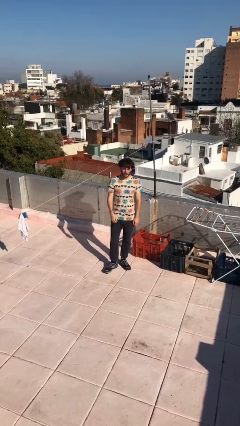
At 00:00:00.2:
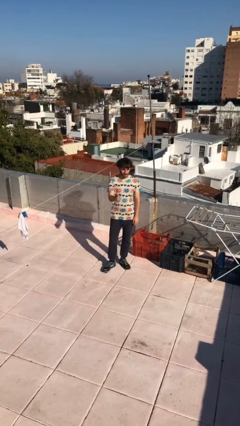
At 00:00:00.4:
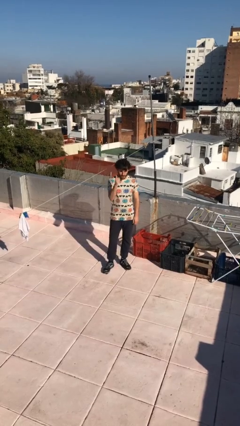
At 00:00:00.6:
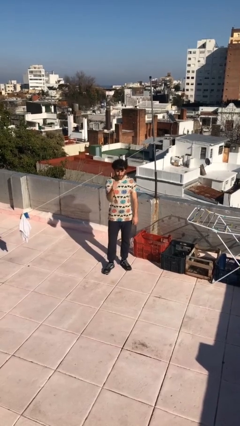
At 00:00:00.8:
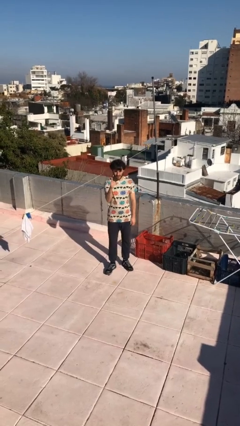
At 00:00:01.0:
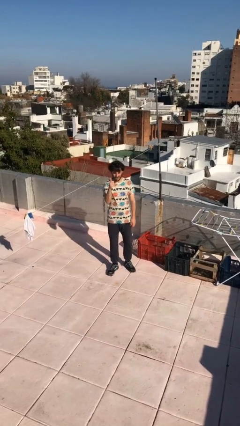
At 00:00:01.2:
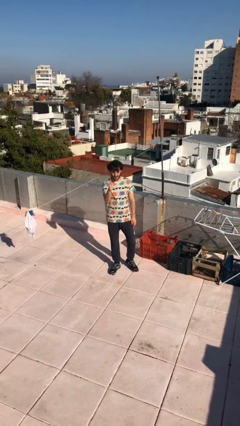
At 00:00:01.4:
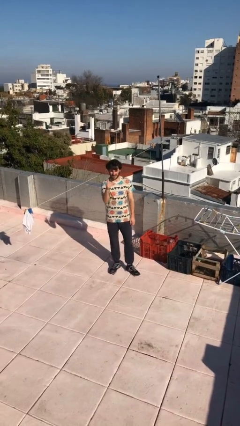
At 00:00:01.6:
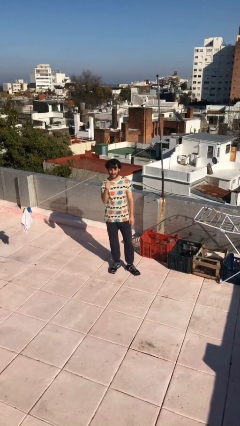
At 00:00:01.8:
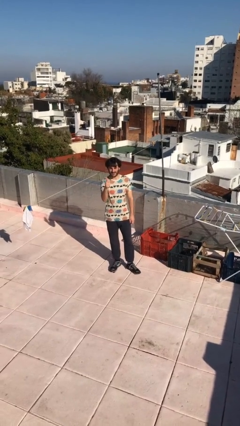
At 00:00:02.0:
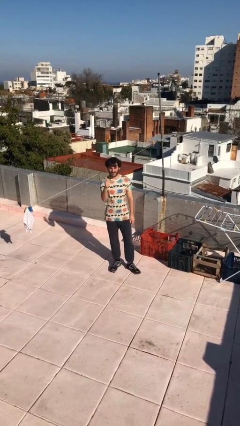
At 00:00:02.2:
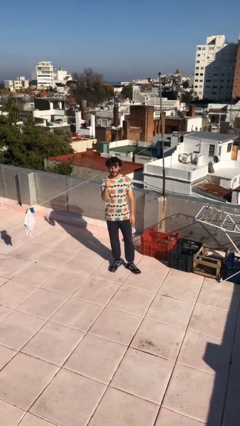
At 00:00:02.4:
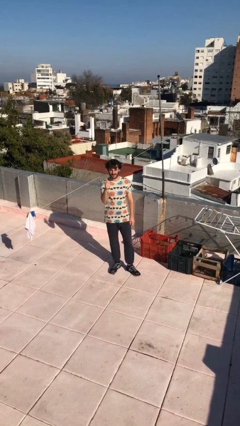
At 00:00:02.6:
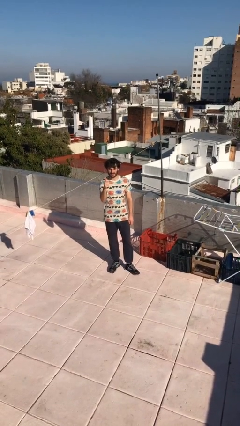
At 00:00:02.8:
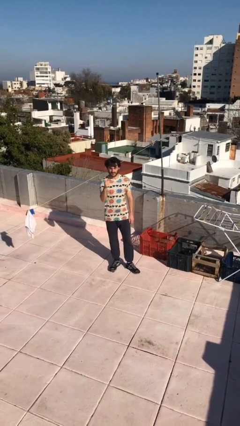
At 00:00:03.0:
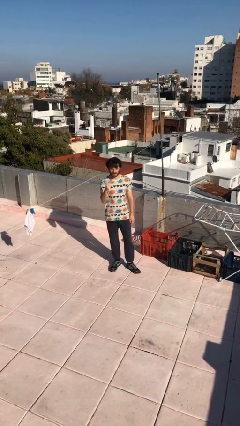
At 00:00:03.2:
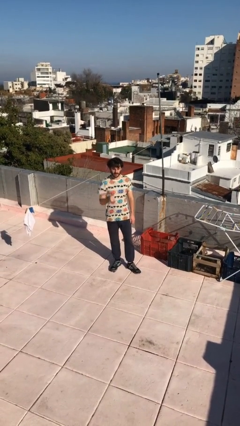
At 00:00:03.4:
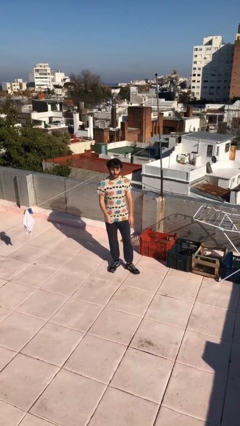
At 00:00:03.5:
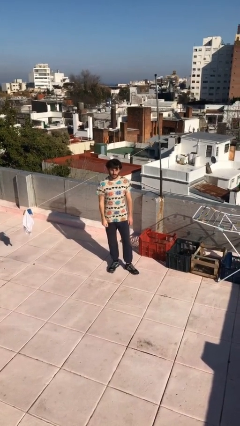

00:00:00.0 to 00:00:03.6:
person gestures thumbs up

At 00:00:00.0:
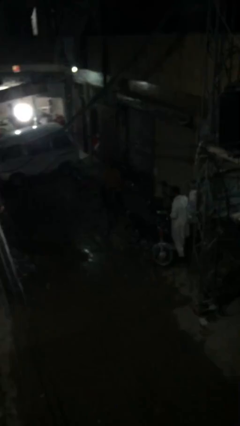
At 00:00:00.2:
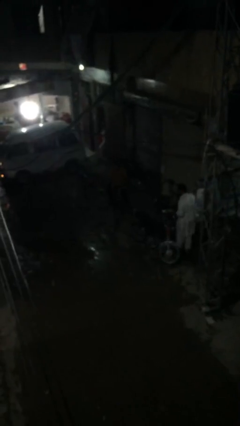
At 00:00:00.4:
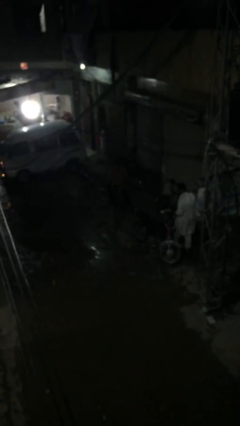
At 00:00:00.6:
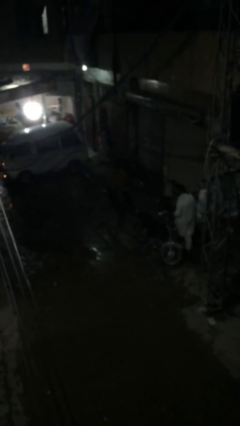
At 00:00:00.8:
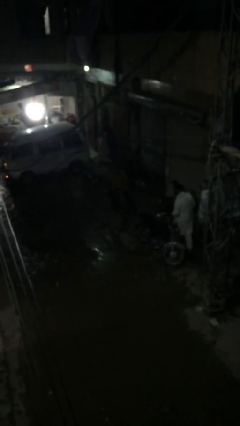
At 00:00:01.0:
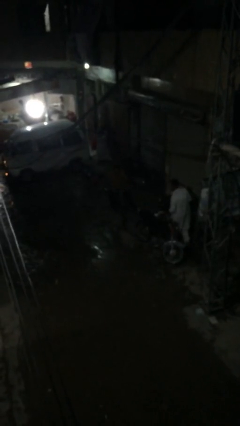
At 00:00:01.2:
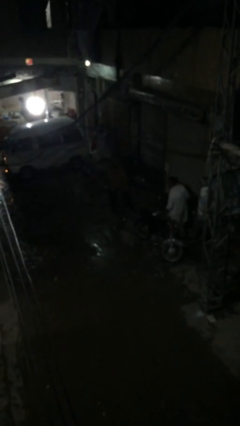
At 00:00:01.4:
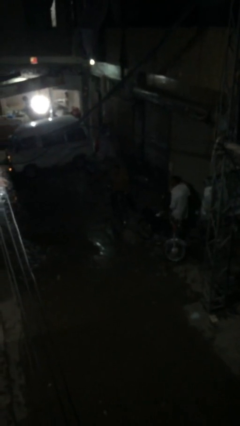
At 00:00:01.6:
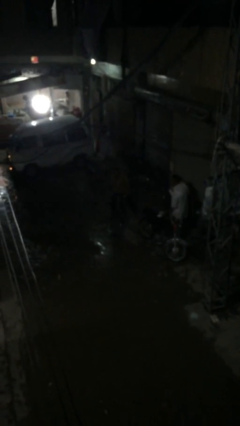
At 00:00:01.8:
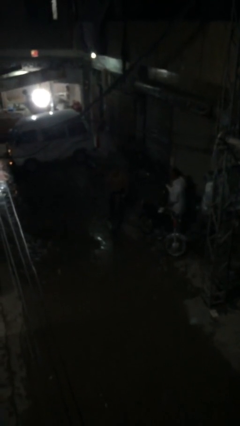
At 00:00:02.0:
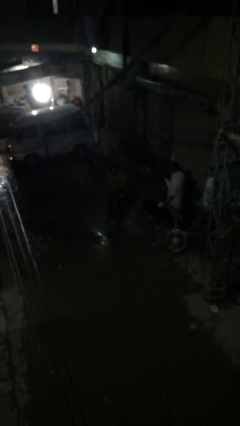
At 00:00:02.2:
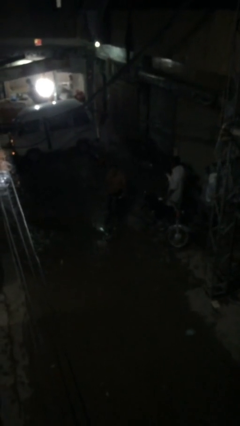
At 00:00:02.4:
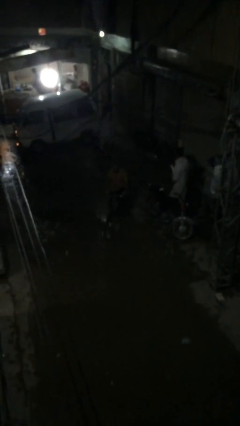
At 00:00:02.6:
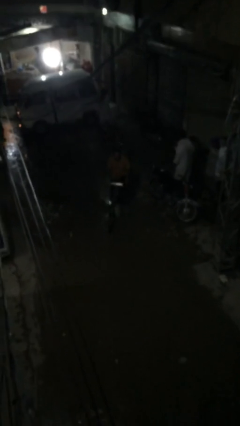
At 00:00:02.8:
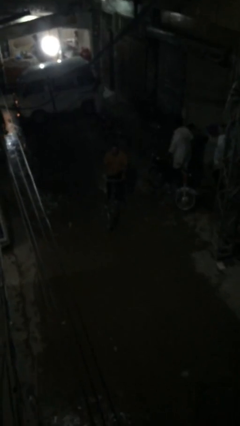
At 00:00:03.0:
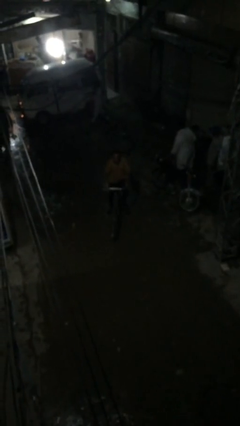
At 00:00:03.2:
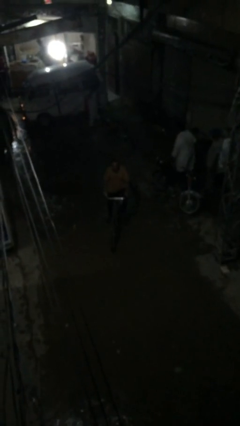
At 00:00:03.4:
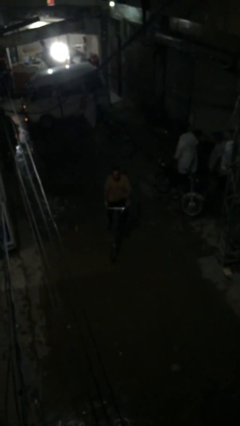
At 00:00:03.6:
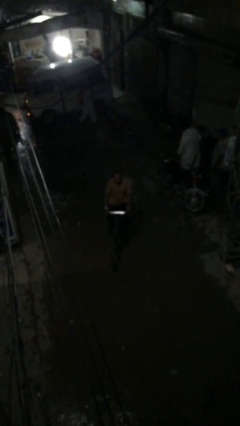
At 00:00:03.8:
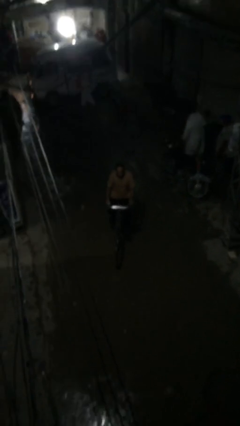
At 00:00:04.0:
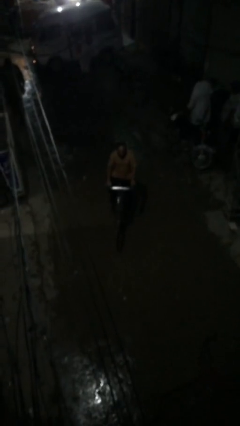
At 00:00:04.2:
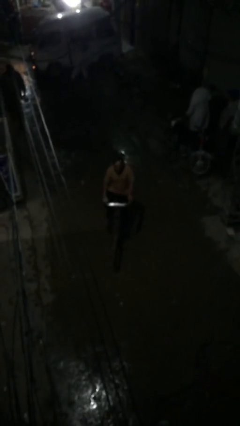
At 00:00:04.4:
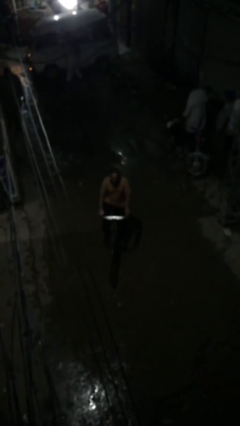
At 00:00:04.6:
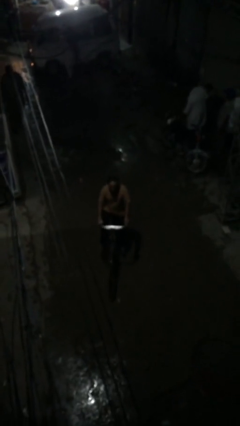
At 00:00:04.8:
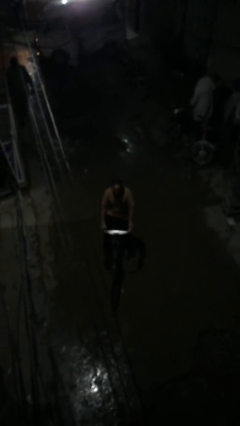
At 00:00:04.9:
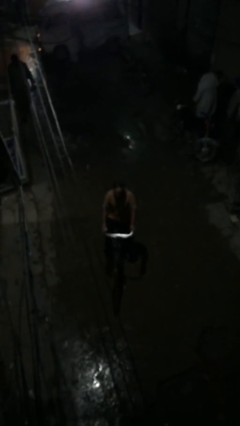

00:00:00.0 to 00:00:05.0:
person rides bicycle

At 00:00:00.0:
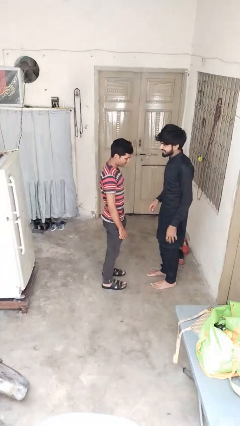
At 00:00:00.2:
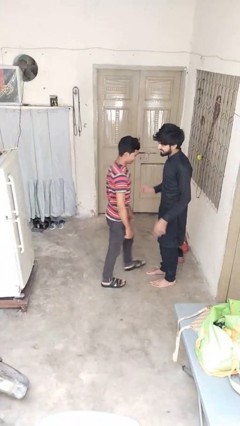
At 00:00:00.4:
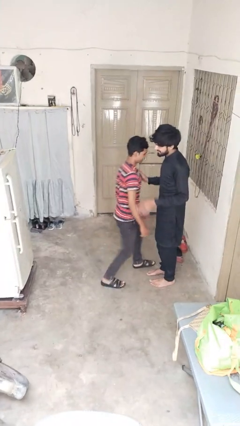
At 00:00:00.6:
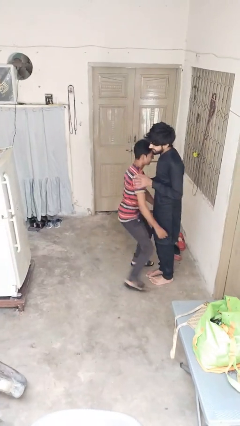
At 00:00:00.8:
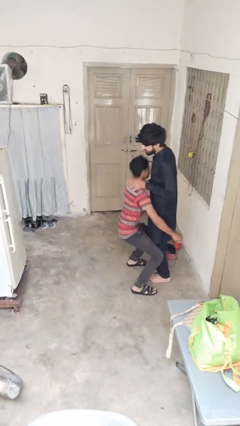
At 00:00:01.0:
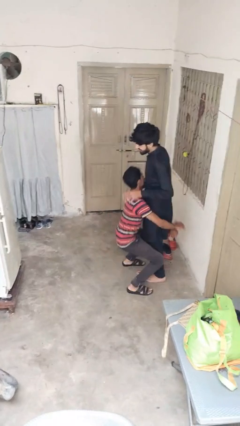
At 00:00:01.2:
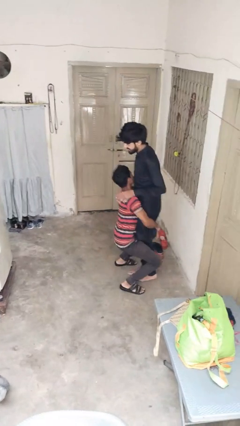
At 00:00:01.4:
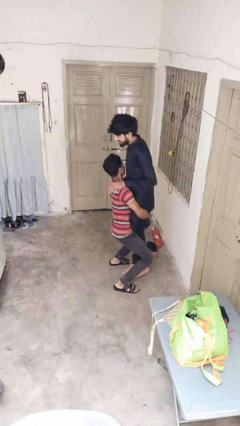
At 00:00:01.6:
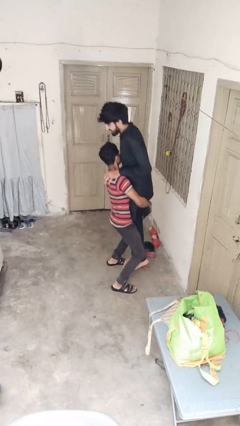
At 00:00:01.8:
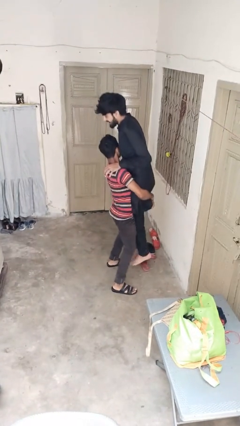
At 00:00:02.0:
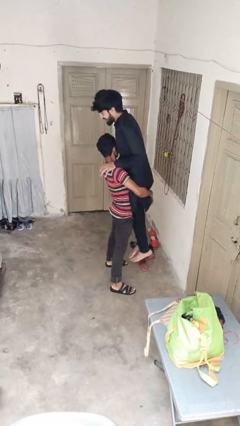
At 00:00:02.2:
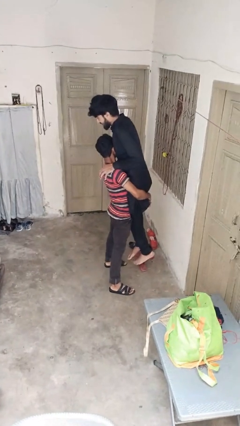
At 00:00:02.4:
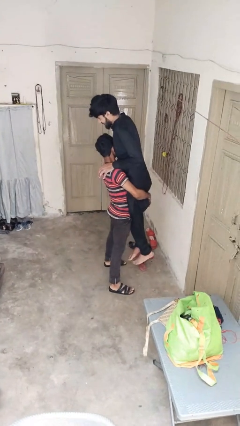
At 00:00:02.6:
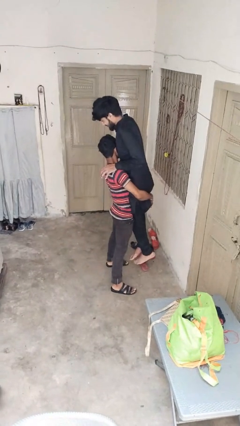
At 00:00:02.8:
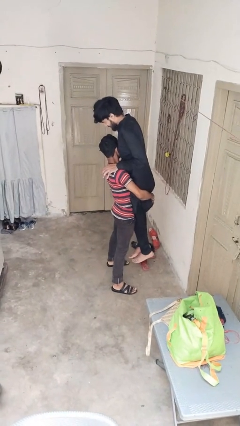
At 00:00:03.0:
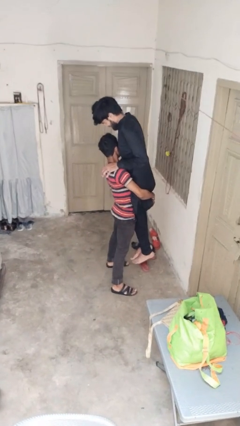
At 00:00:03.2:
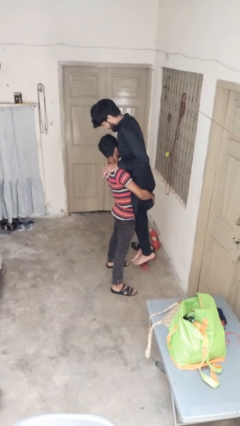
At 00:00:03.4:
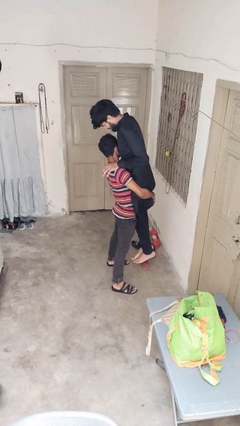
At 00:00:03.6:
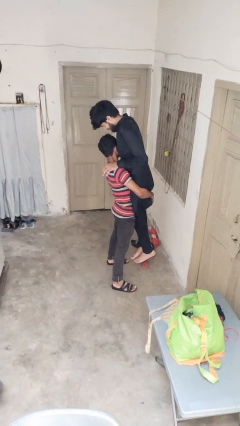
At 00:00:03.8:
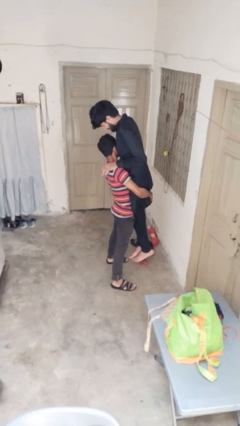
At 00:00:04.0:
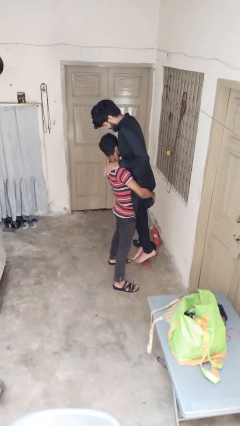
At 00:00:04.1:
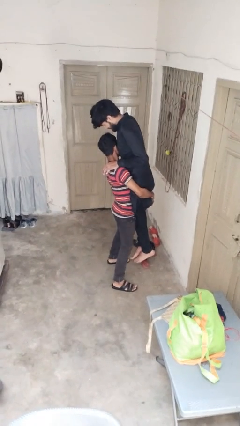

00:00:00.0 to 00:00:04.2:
person picks up person

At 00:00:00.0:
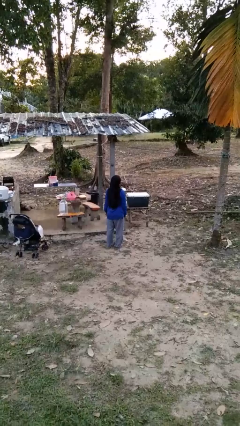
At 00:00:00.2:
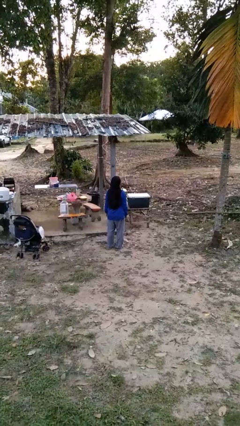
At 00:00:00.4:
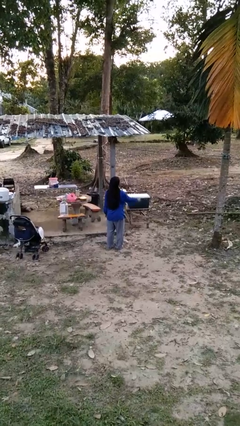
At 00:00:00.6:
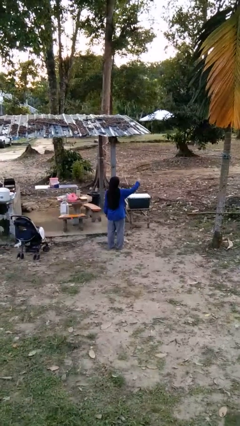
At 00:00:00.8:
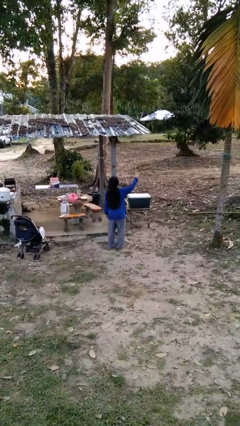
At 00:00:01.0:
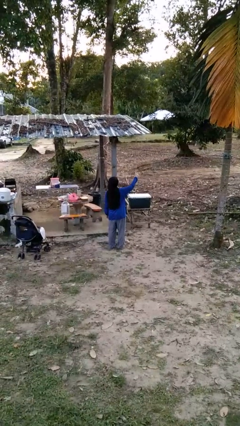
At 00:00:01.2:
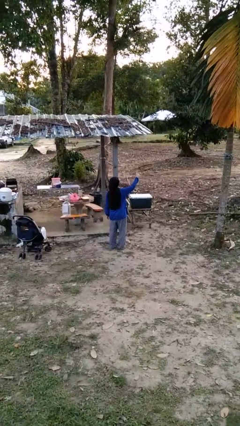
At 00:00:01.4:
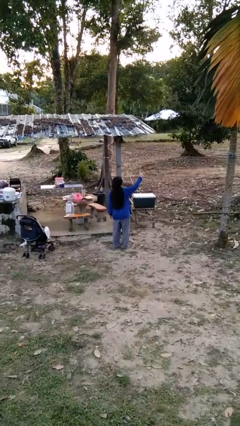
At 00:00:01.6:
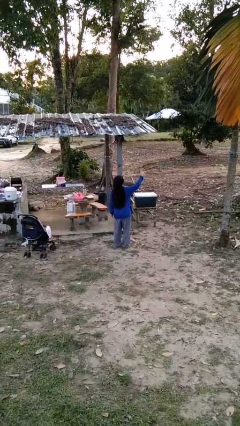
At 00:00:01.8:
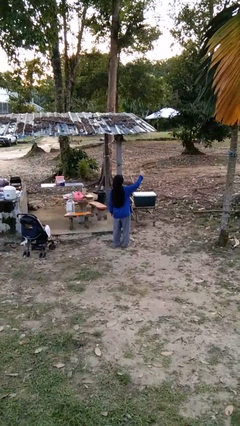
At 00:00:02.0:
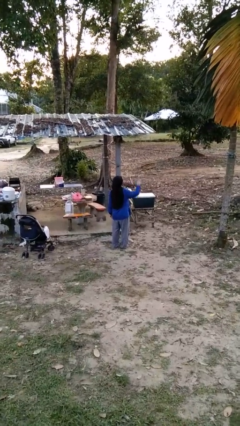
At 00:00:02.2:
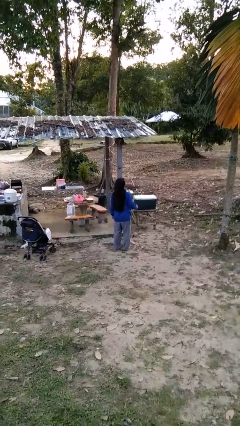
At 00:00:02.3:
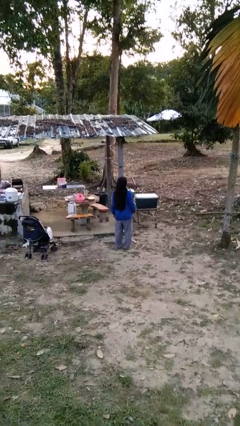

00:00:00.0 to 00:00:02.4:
person gestures number three

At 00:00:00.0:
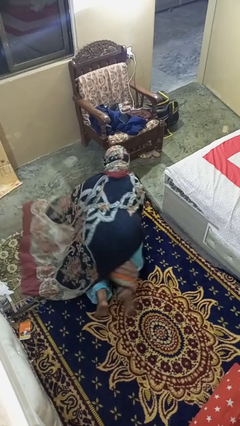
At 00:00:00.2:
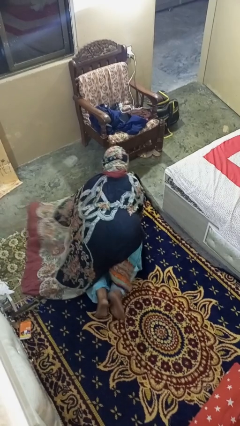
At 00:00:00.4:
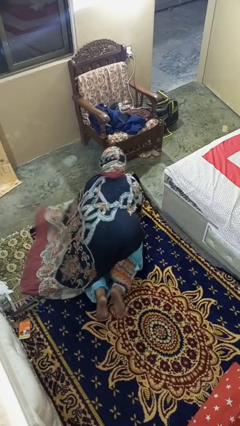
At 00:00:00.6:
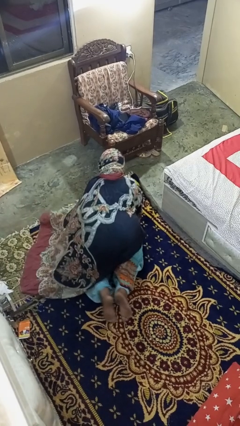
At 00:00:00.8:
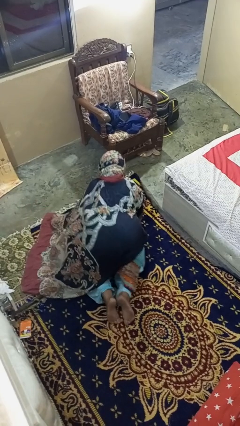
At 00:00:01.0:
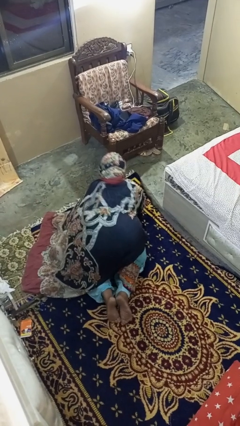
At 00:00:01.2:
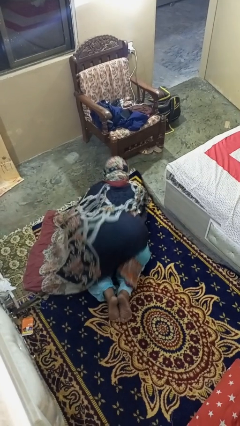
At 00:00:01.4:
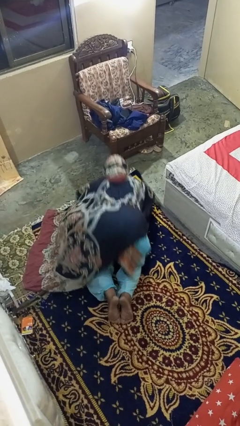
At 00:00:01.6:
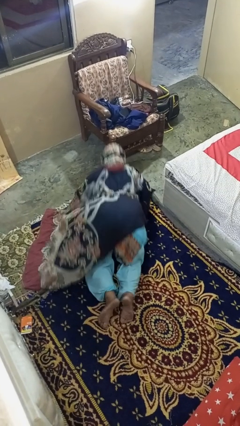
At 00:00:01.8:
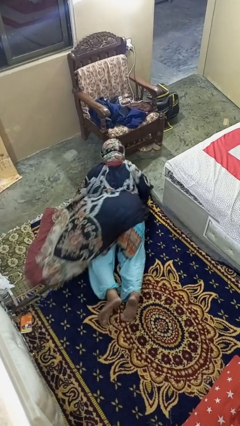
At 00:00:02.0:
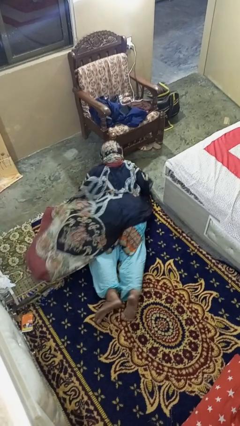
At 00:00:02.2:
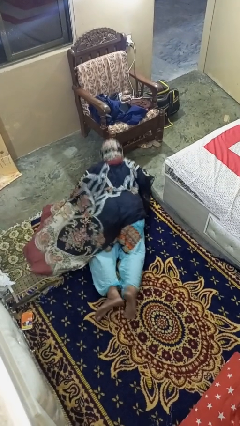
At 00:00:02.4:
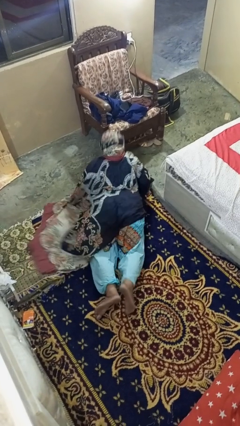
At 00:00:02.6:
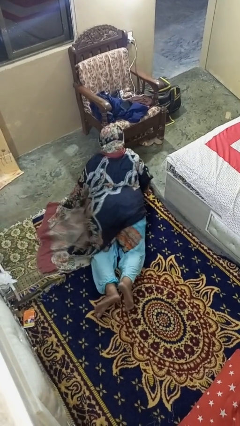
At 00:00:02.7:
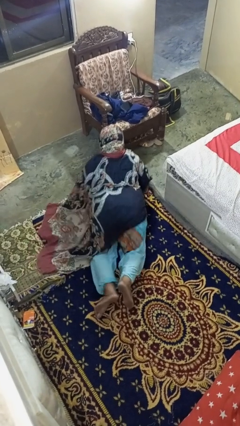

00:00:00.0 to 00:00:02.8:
person exercises with pushup
